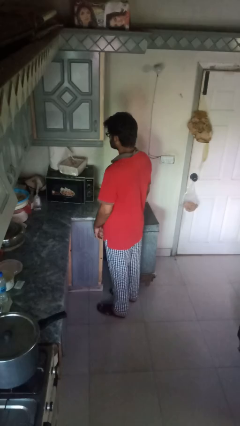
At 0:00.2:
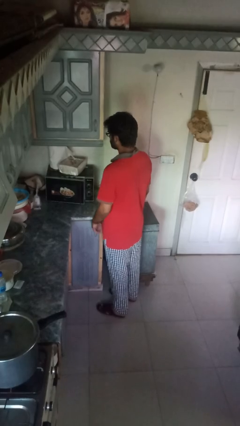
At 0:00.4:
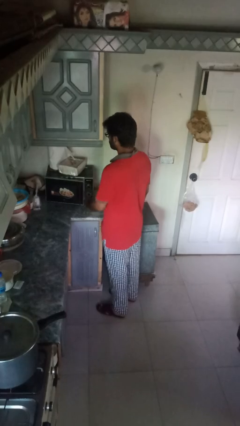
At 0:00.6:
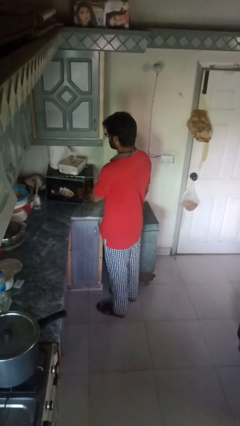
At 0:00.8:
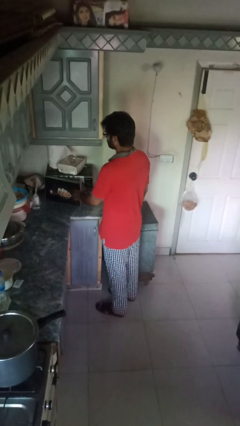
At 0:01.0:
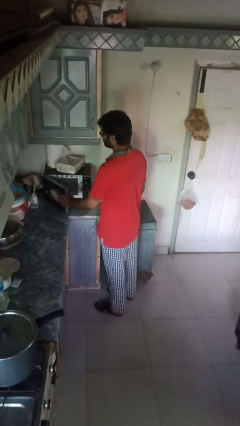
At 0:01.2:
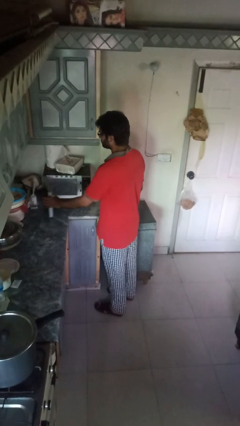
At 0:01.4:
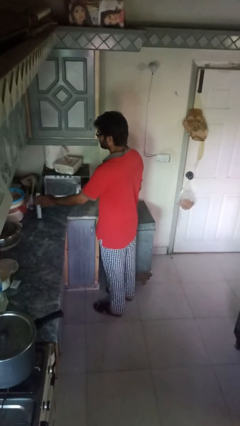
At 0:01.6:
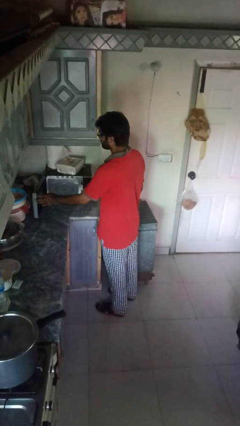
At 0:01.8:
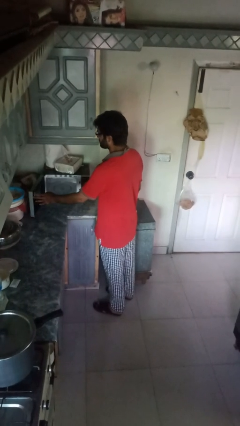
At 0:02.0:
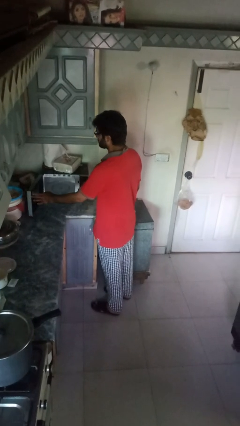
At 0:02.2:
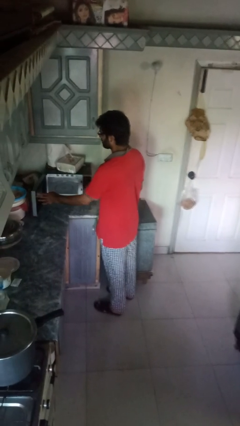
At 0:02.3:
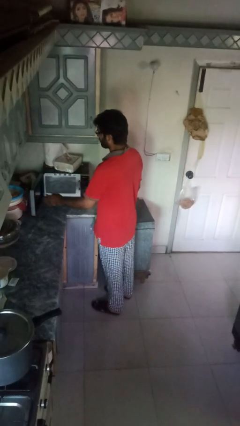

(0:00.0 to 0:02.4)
person opens oven door

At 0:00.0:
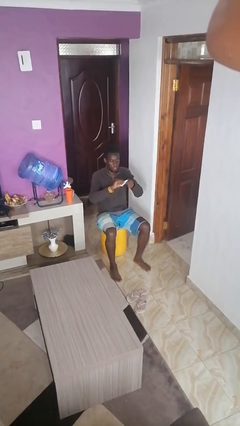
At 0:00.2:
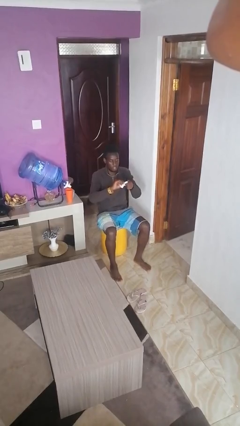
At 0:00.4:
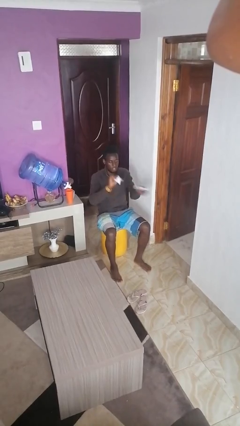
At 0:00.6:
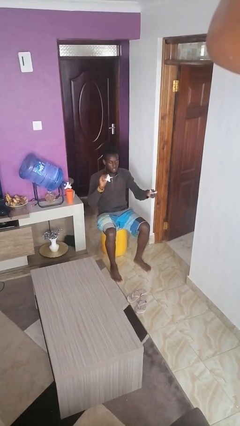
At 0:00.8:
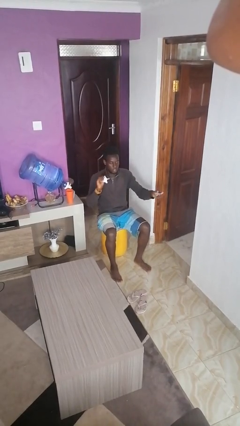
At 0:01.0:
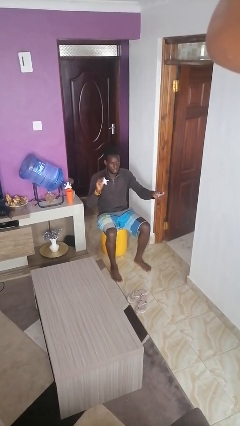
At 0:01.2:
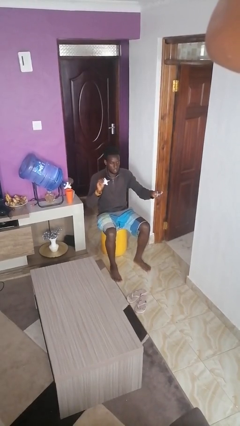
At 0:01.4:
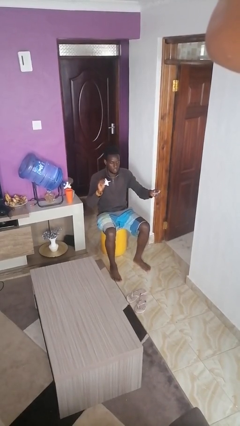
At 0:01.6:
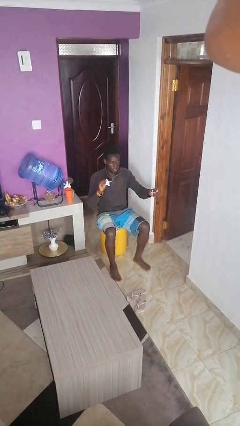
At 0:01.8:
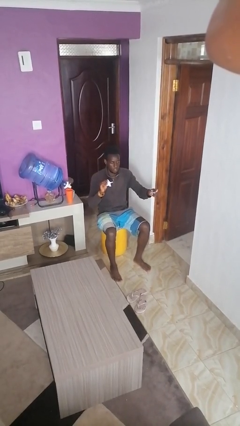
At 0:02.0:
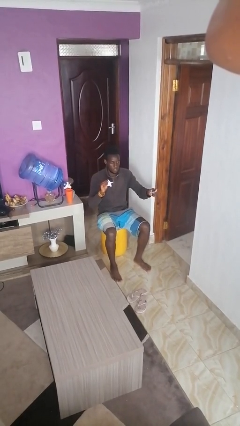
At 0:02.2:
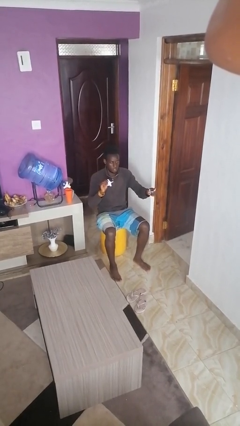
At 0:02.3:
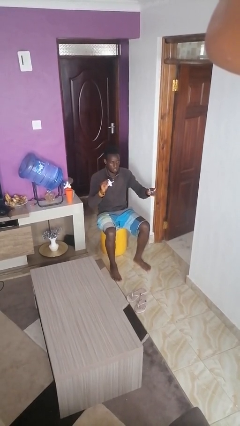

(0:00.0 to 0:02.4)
person tears paper

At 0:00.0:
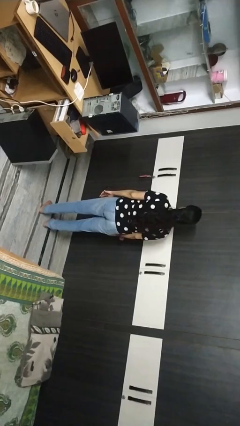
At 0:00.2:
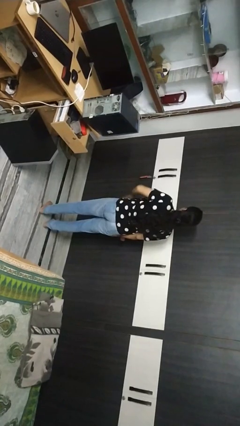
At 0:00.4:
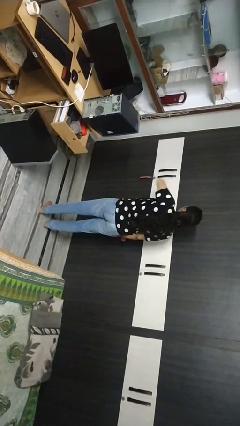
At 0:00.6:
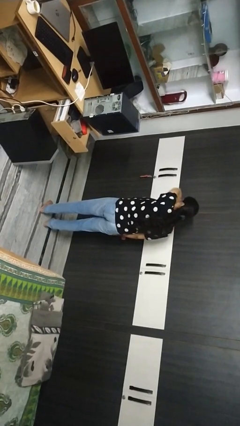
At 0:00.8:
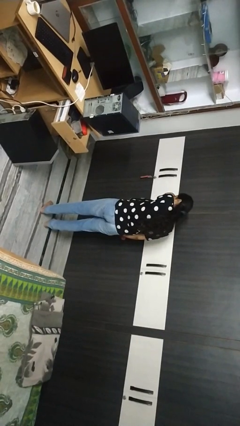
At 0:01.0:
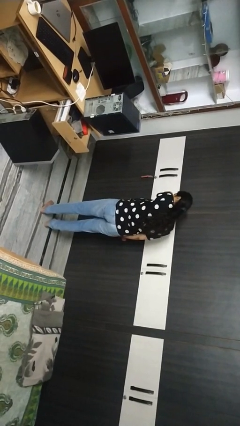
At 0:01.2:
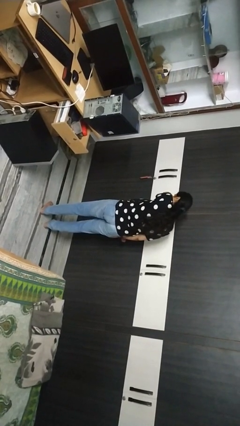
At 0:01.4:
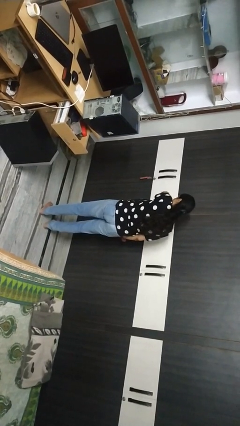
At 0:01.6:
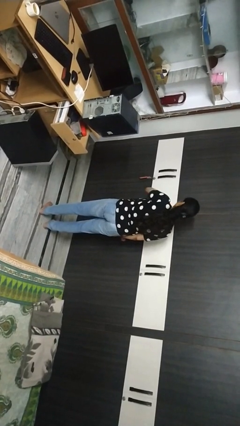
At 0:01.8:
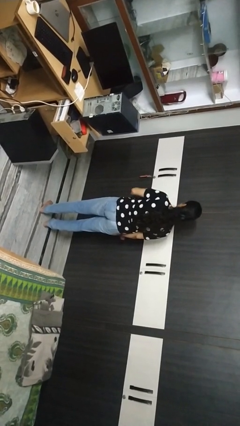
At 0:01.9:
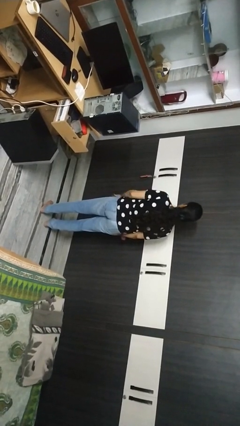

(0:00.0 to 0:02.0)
person sneezes into arm

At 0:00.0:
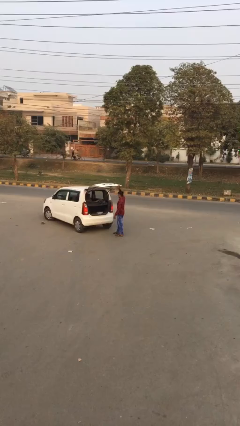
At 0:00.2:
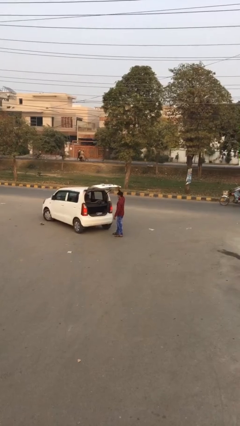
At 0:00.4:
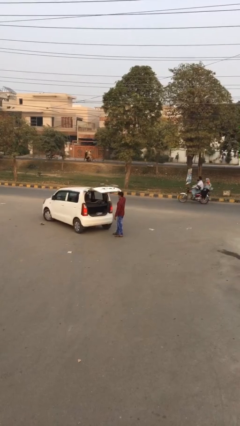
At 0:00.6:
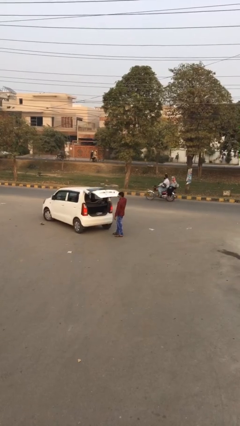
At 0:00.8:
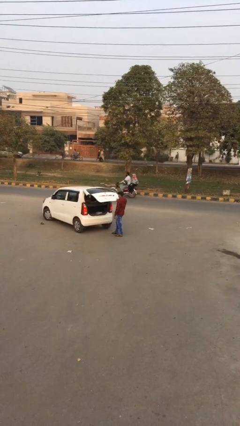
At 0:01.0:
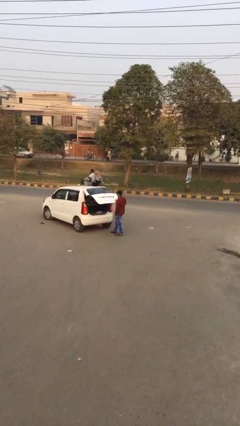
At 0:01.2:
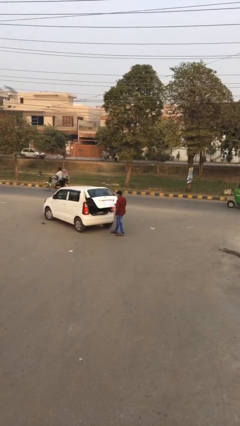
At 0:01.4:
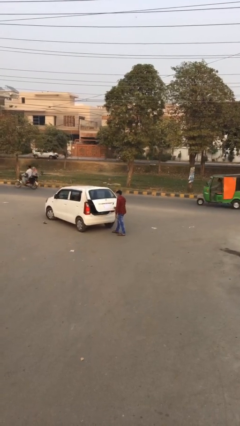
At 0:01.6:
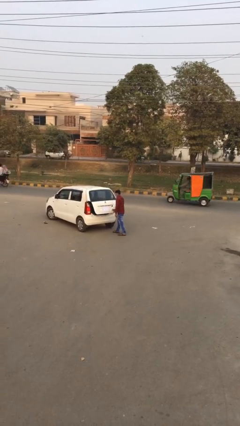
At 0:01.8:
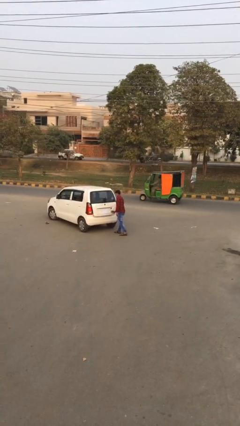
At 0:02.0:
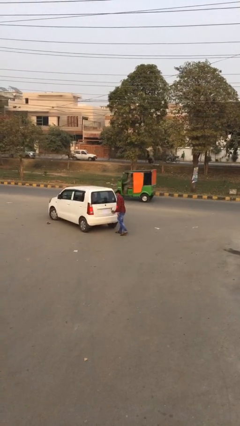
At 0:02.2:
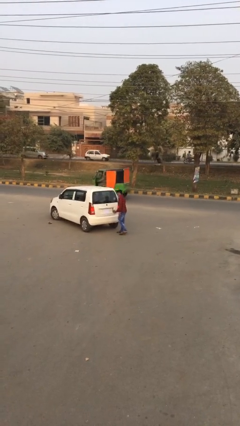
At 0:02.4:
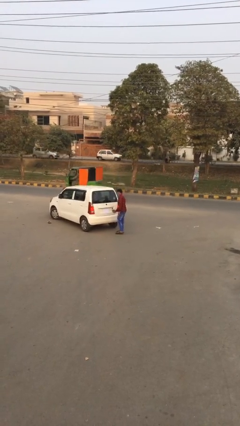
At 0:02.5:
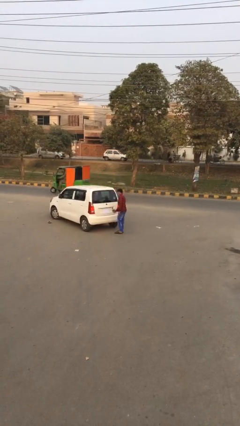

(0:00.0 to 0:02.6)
person closes car trunk

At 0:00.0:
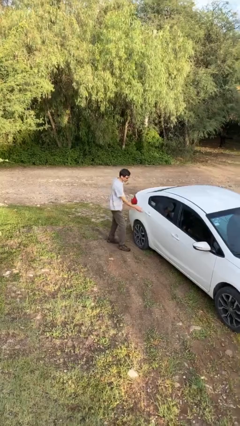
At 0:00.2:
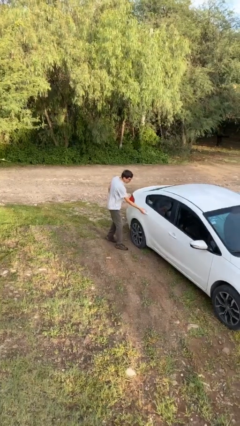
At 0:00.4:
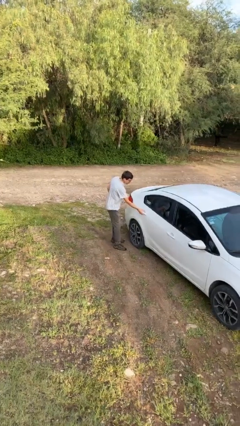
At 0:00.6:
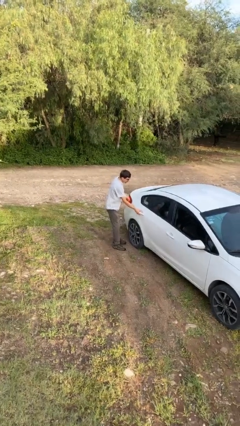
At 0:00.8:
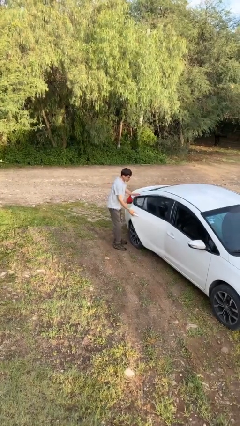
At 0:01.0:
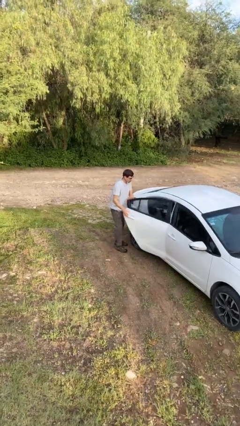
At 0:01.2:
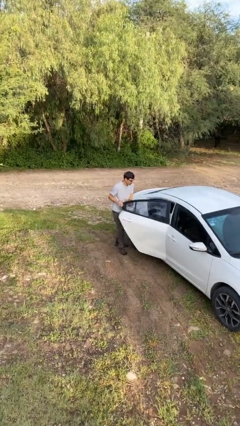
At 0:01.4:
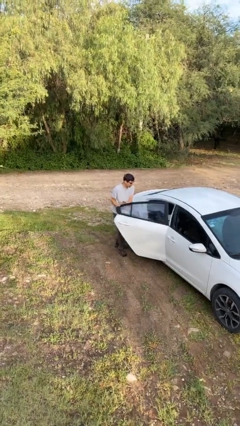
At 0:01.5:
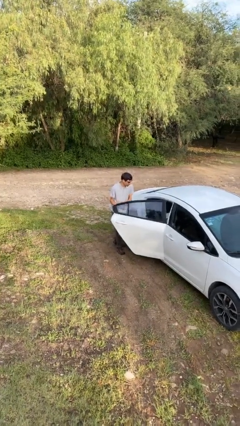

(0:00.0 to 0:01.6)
person opens car door

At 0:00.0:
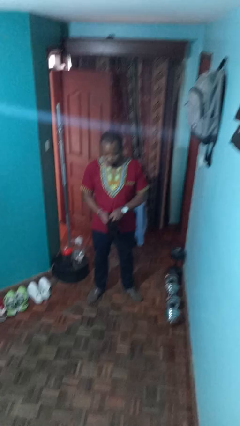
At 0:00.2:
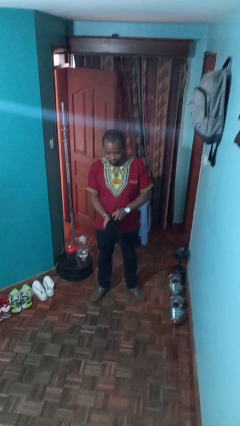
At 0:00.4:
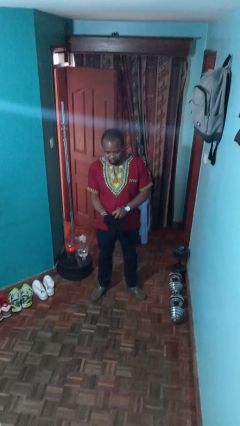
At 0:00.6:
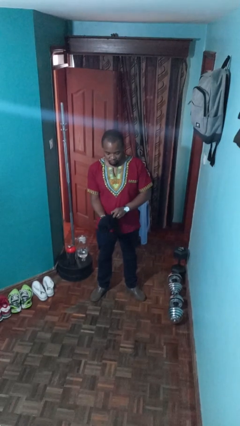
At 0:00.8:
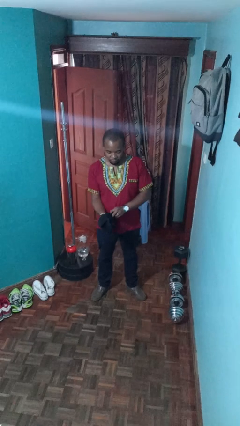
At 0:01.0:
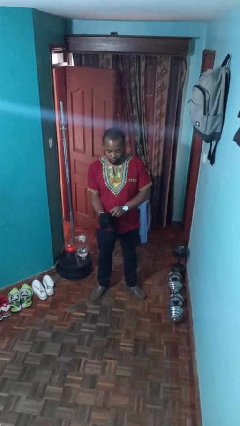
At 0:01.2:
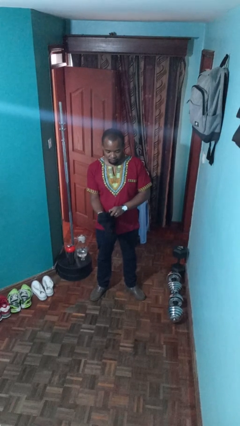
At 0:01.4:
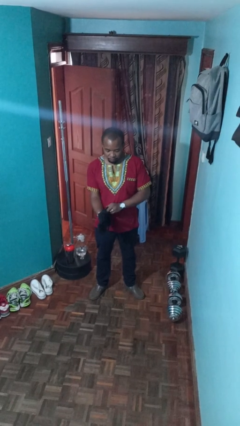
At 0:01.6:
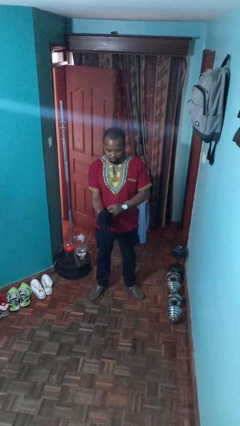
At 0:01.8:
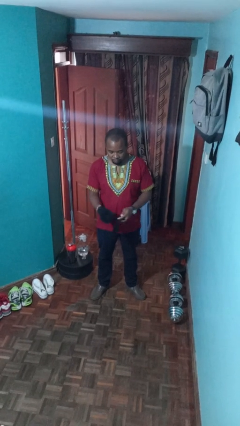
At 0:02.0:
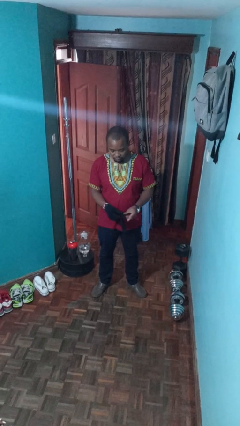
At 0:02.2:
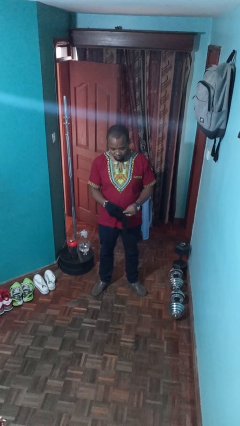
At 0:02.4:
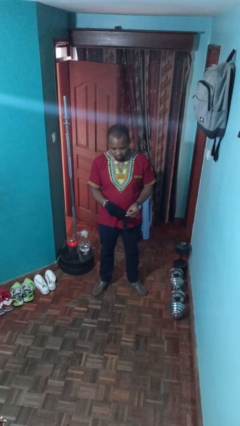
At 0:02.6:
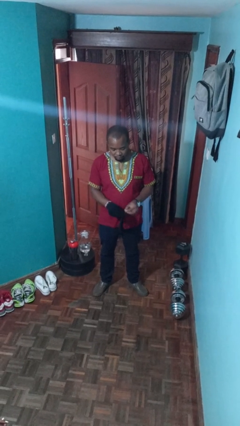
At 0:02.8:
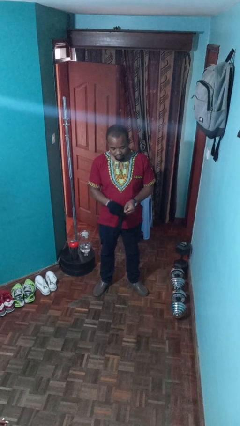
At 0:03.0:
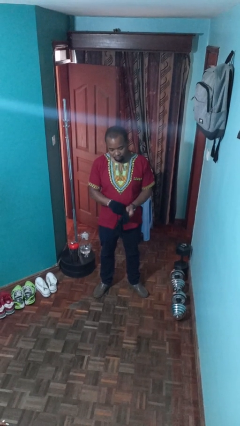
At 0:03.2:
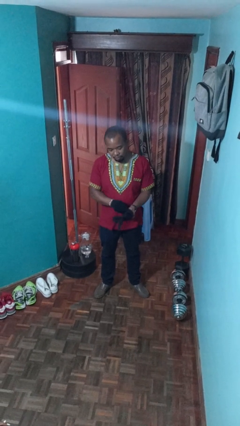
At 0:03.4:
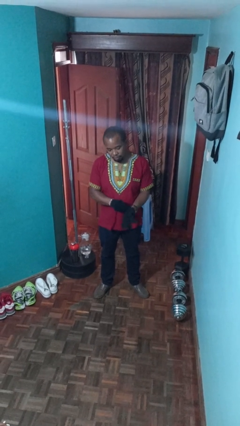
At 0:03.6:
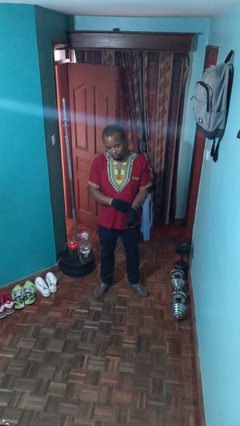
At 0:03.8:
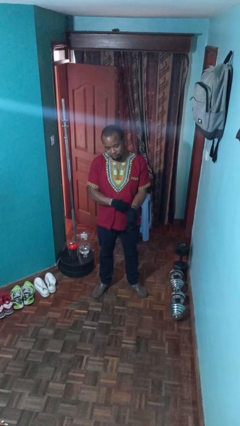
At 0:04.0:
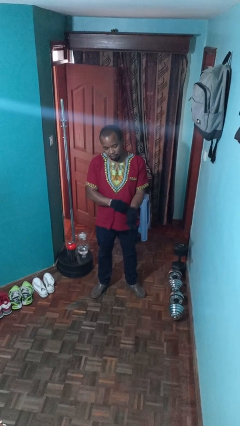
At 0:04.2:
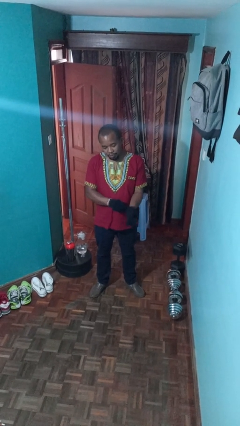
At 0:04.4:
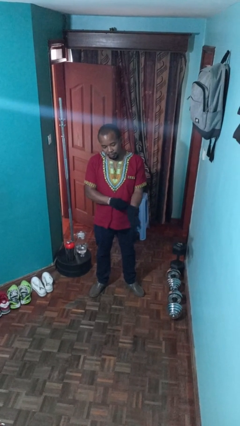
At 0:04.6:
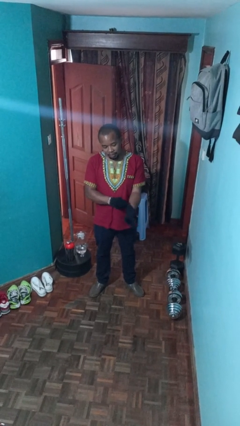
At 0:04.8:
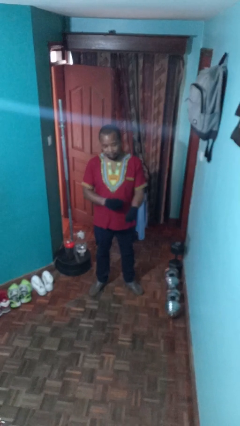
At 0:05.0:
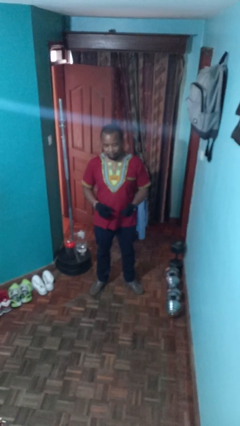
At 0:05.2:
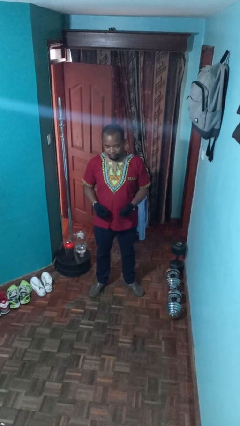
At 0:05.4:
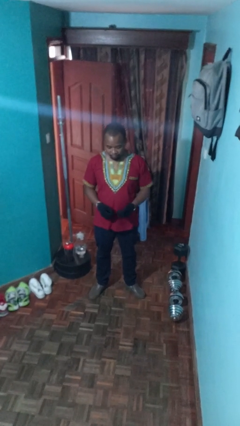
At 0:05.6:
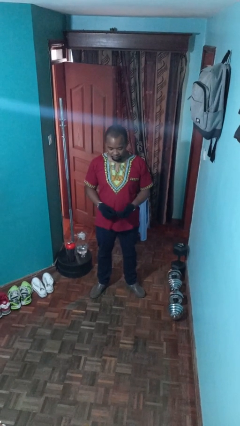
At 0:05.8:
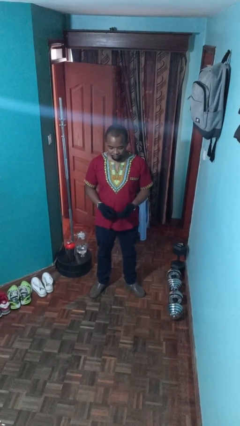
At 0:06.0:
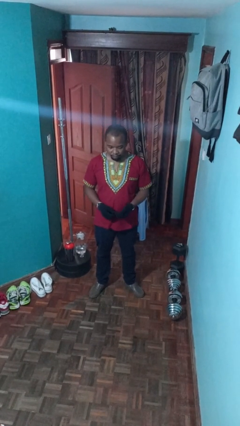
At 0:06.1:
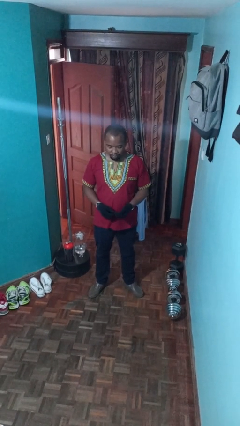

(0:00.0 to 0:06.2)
person puts on gloves

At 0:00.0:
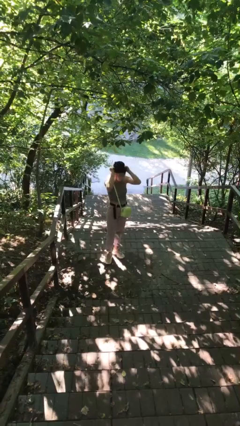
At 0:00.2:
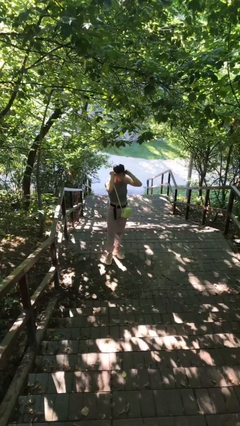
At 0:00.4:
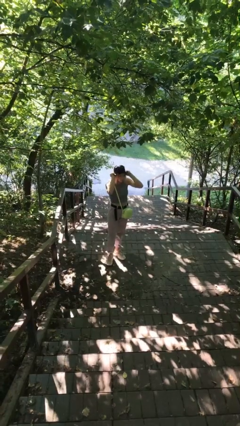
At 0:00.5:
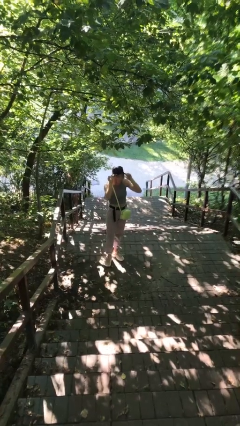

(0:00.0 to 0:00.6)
person puts on hat
